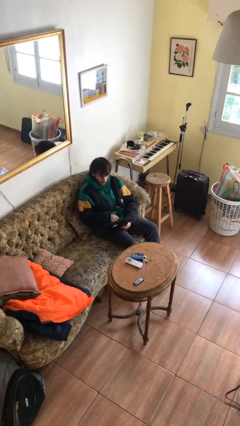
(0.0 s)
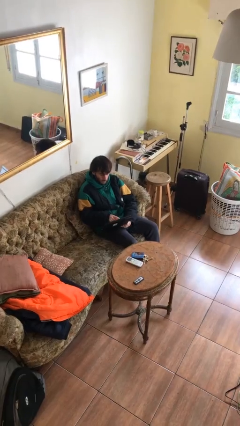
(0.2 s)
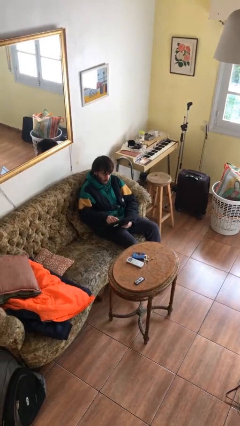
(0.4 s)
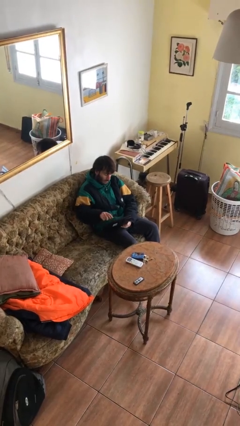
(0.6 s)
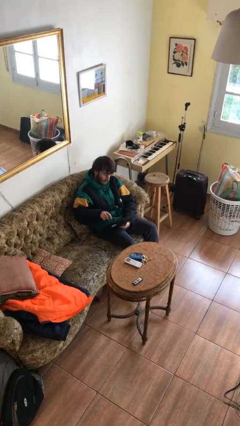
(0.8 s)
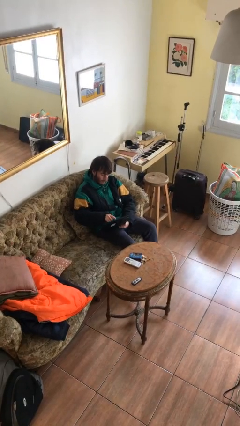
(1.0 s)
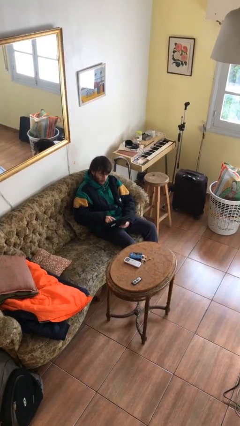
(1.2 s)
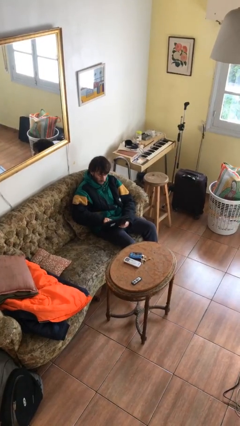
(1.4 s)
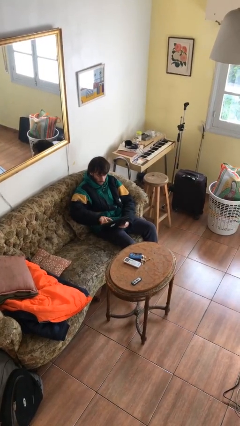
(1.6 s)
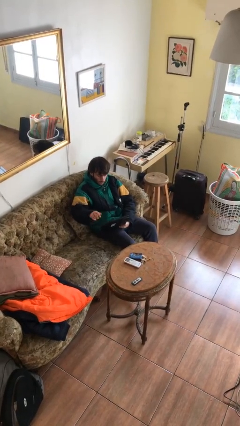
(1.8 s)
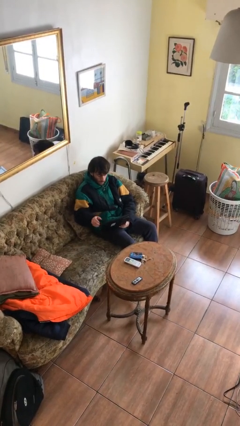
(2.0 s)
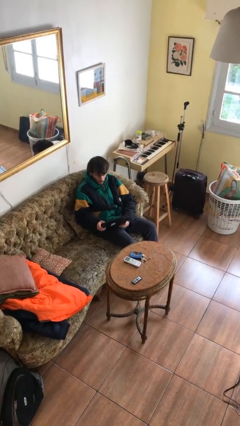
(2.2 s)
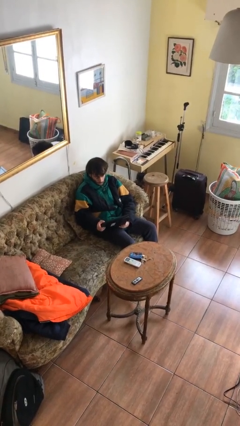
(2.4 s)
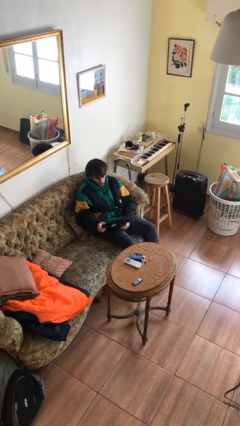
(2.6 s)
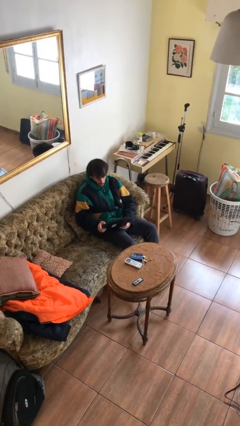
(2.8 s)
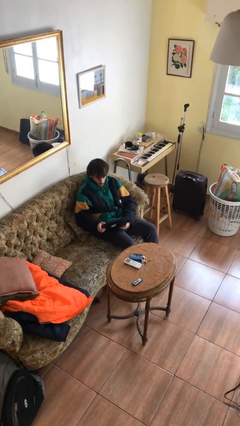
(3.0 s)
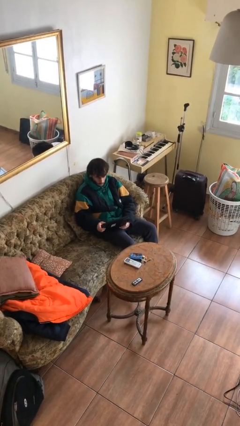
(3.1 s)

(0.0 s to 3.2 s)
person interacts with tablet

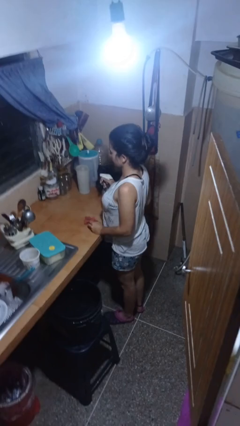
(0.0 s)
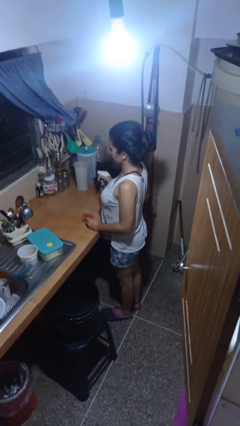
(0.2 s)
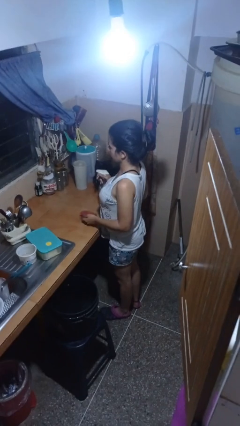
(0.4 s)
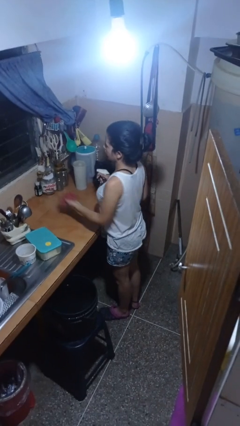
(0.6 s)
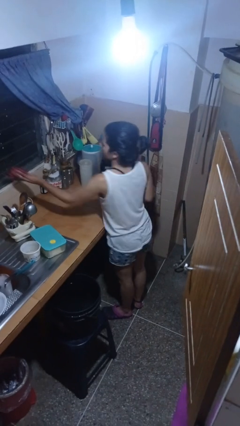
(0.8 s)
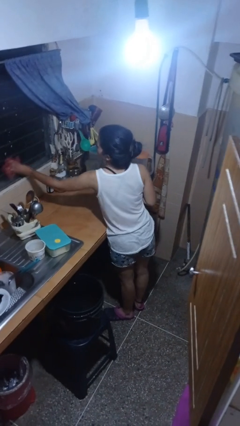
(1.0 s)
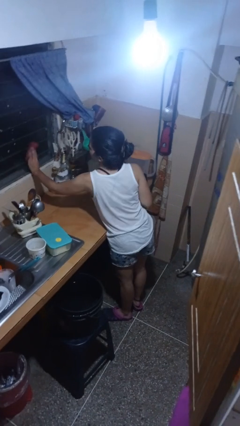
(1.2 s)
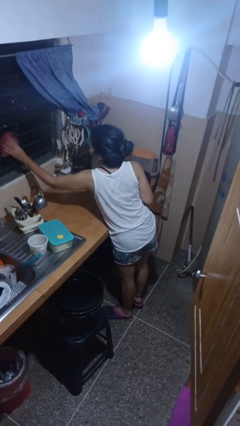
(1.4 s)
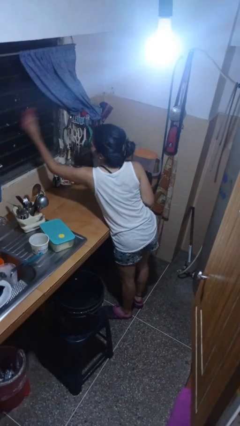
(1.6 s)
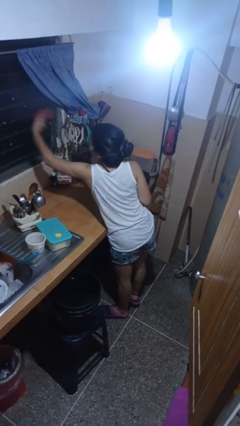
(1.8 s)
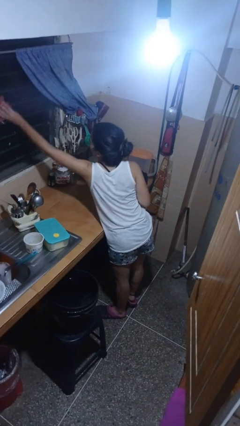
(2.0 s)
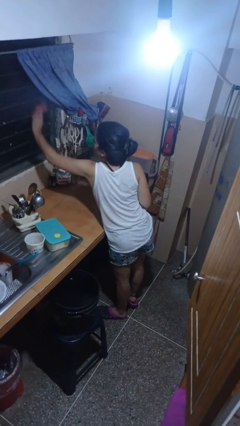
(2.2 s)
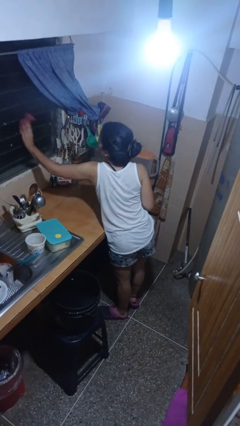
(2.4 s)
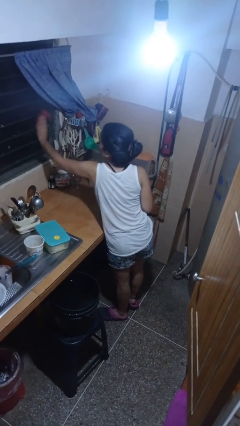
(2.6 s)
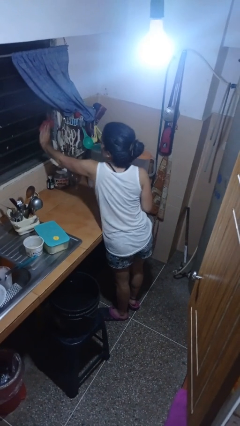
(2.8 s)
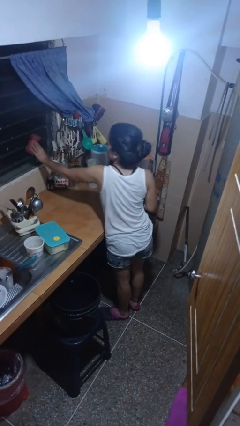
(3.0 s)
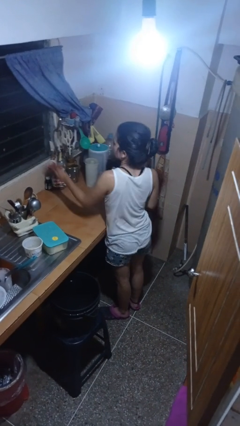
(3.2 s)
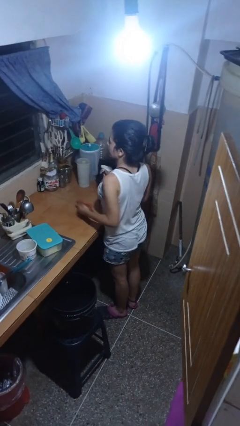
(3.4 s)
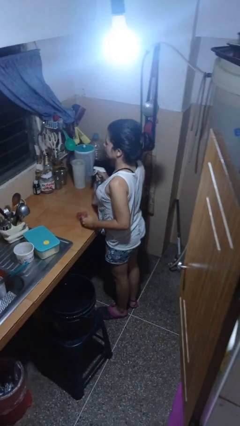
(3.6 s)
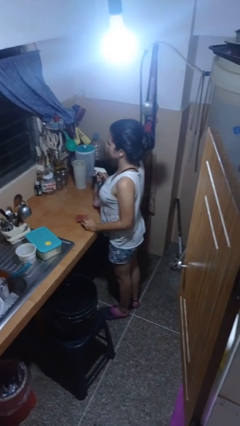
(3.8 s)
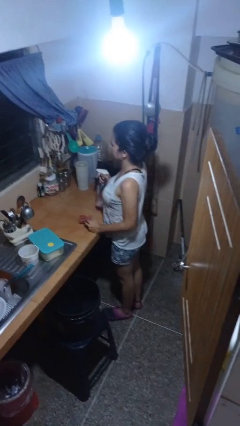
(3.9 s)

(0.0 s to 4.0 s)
person washes window

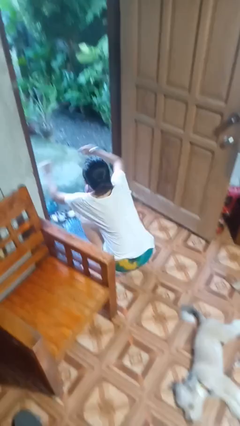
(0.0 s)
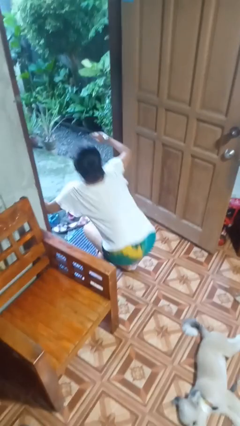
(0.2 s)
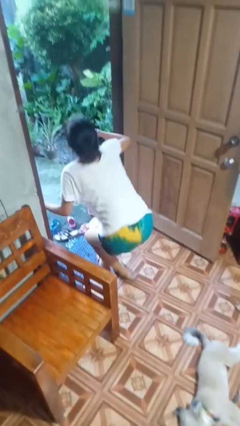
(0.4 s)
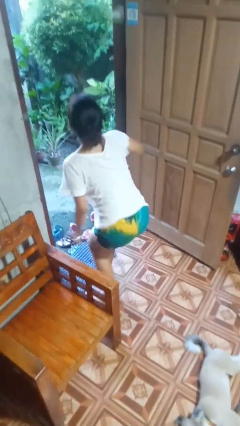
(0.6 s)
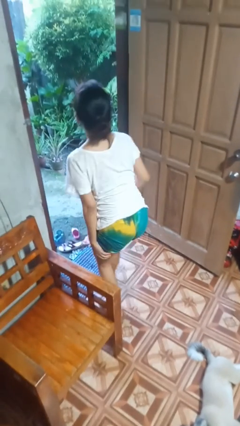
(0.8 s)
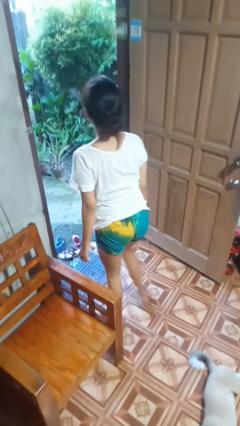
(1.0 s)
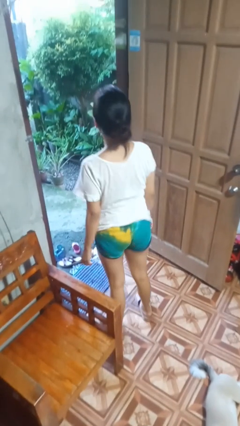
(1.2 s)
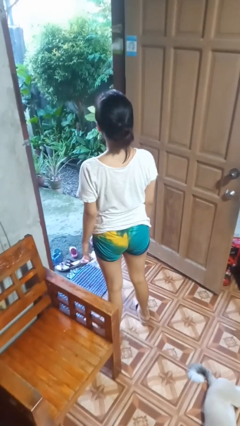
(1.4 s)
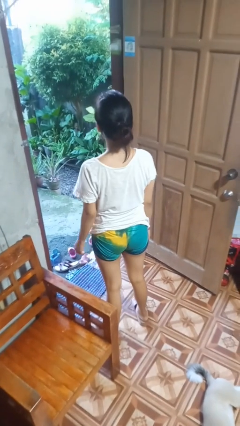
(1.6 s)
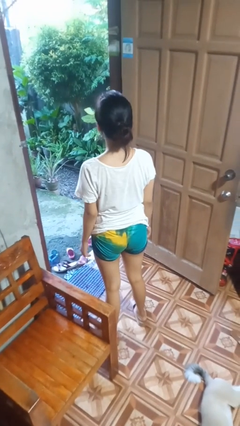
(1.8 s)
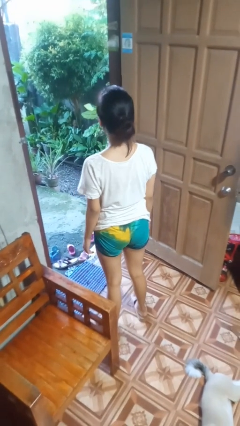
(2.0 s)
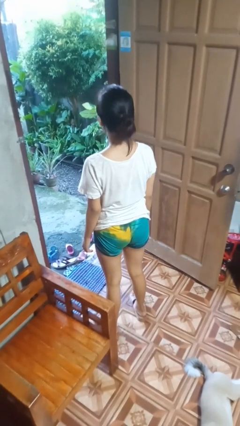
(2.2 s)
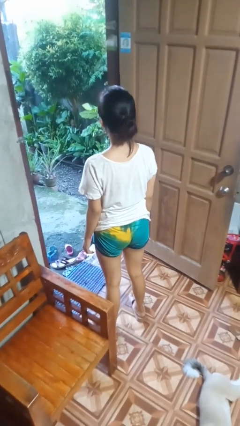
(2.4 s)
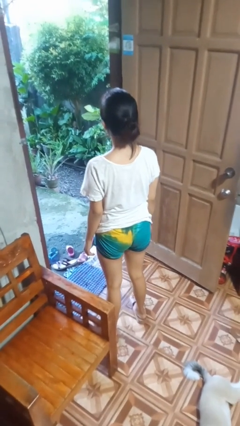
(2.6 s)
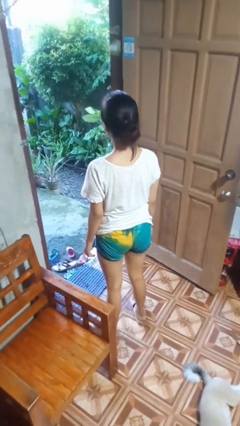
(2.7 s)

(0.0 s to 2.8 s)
person stands up from floor

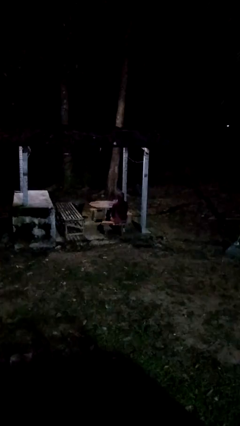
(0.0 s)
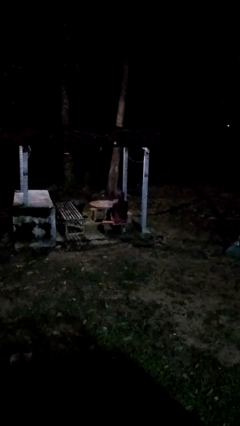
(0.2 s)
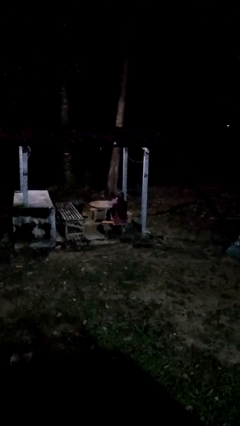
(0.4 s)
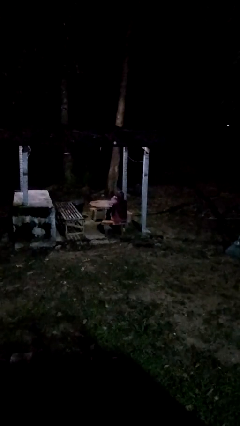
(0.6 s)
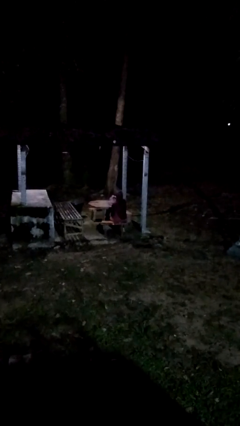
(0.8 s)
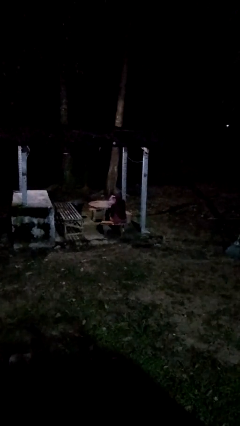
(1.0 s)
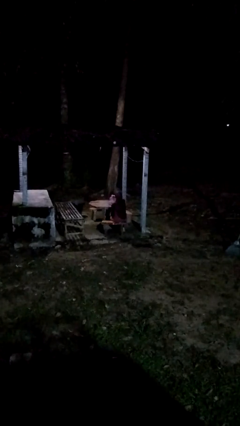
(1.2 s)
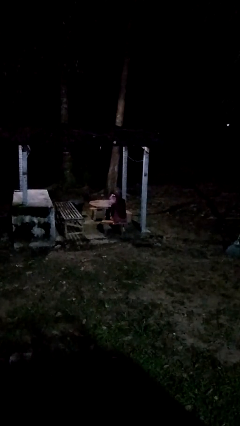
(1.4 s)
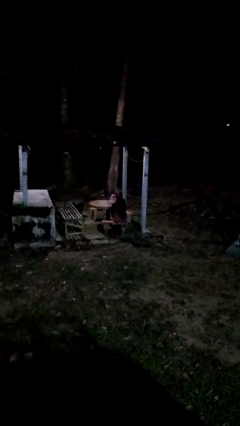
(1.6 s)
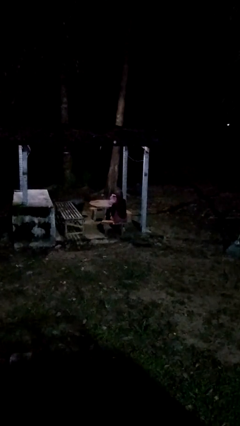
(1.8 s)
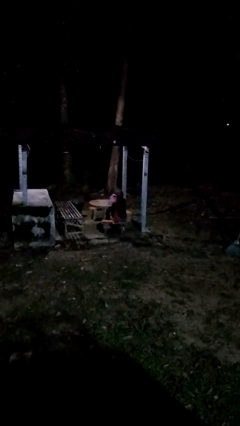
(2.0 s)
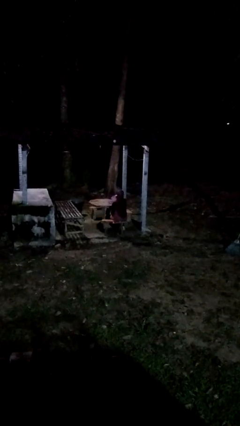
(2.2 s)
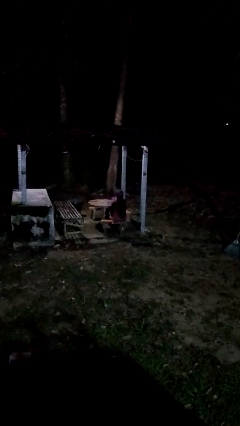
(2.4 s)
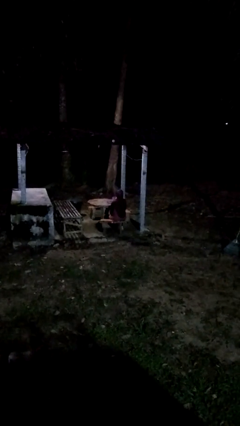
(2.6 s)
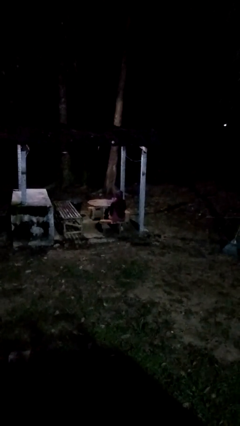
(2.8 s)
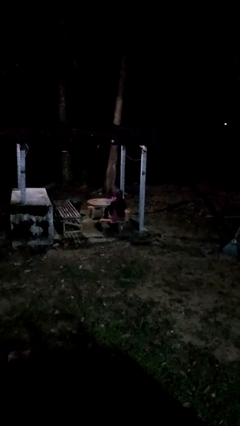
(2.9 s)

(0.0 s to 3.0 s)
person pours coffee into mug

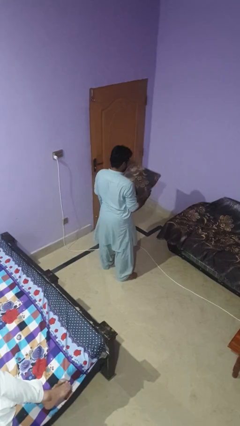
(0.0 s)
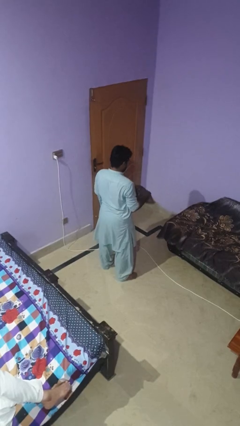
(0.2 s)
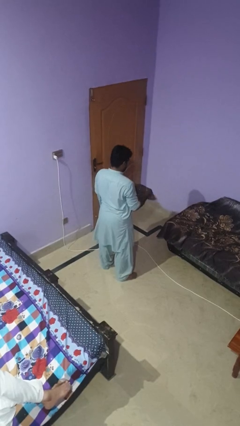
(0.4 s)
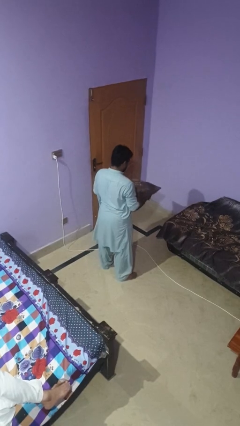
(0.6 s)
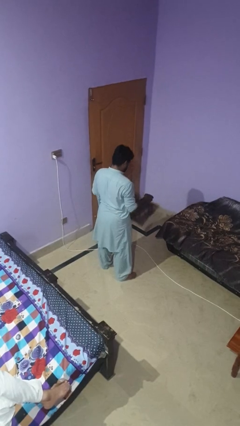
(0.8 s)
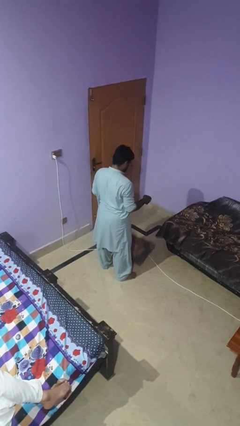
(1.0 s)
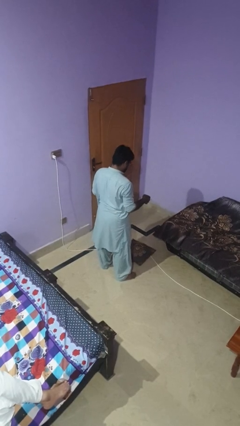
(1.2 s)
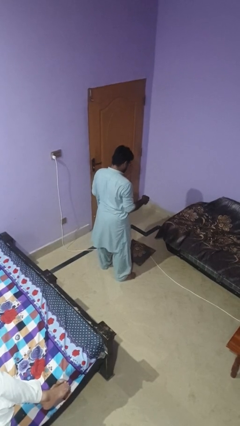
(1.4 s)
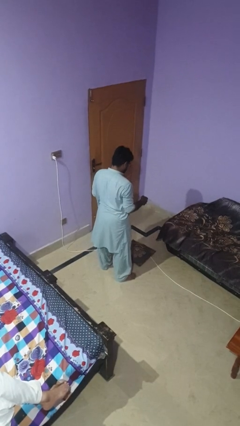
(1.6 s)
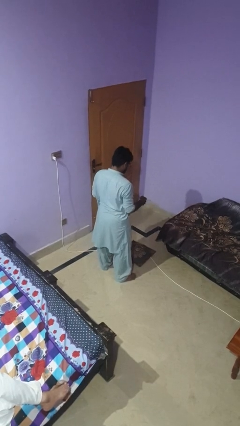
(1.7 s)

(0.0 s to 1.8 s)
person drops object

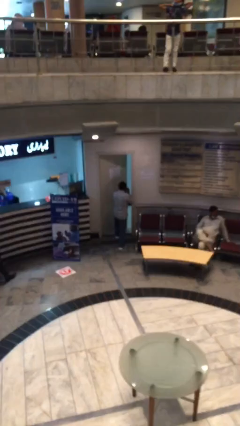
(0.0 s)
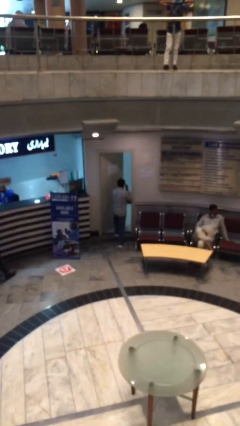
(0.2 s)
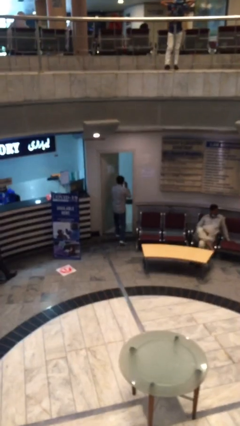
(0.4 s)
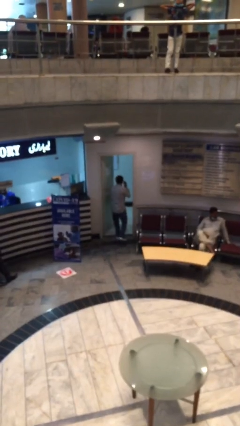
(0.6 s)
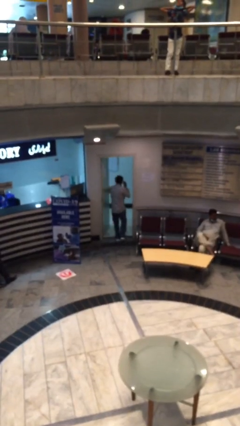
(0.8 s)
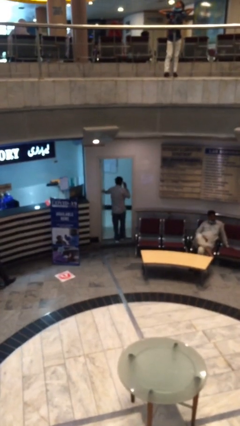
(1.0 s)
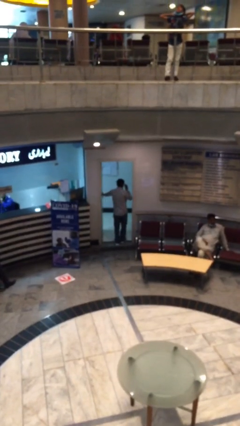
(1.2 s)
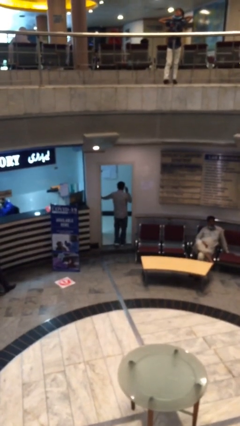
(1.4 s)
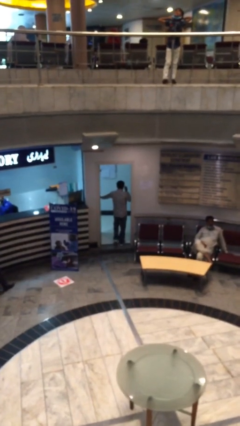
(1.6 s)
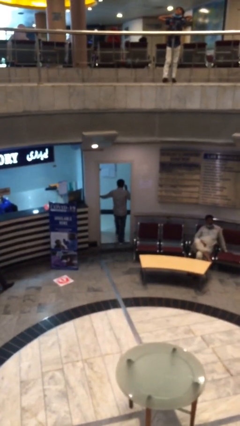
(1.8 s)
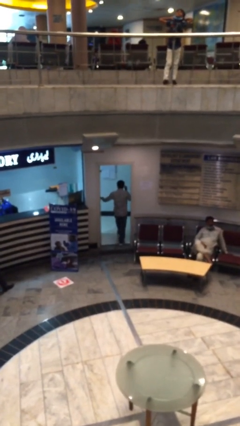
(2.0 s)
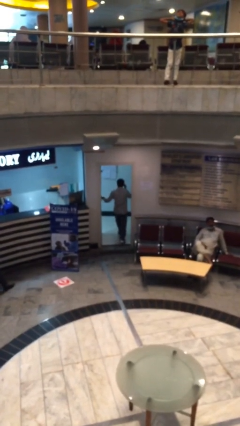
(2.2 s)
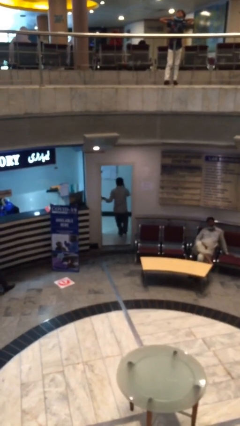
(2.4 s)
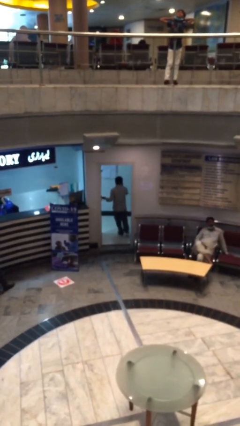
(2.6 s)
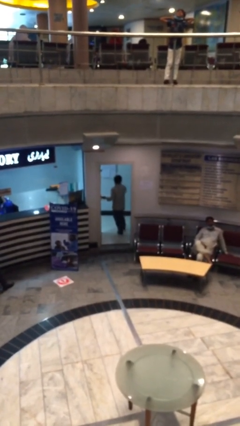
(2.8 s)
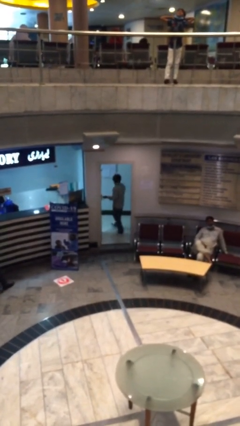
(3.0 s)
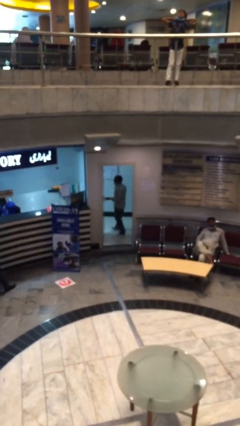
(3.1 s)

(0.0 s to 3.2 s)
person exits scene through structure
